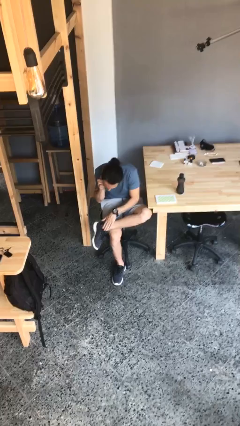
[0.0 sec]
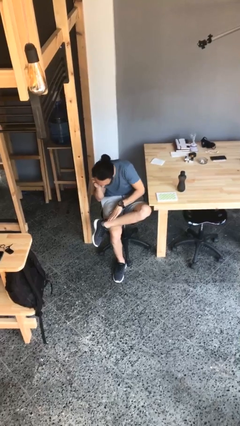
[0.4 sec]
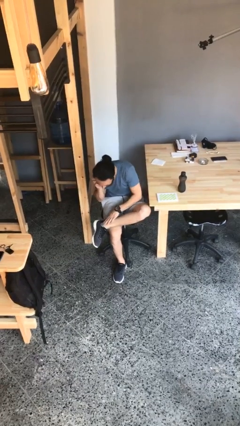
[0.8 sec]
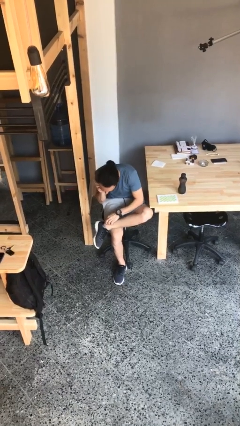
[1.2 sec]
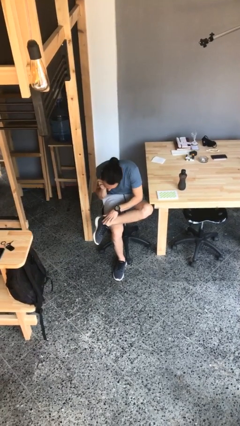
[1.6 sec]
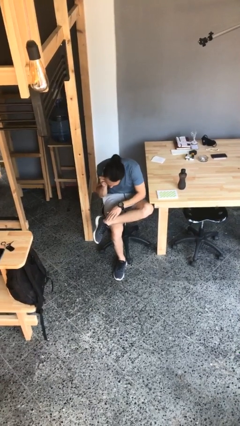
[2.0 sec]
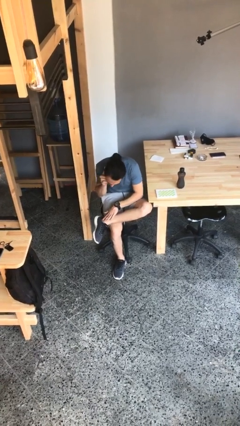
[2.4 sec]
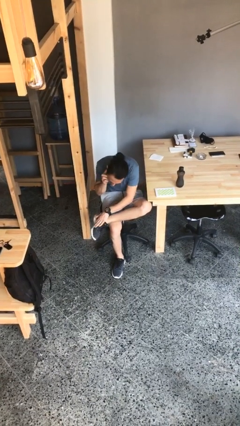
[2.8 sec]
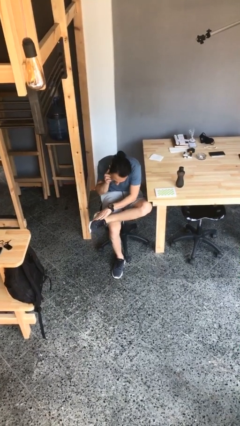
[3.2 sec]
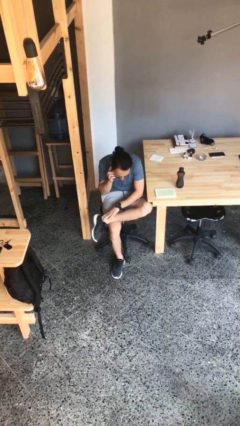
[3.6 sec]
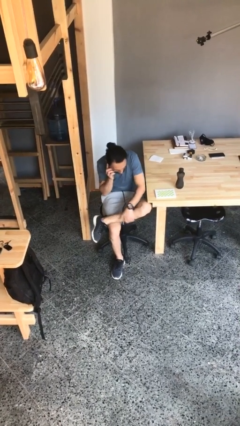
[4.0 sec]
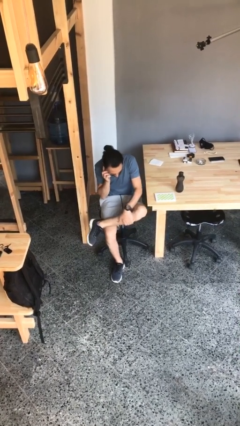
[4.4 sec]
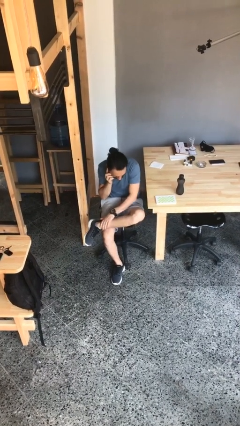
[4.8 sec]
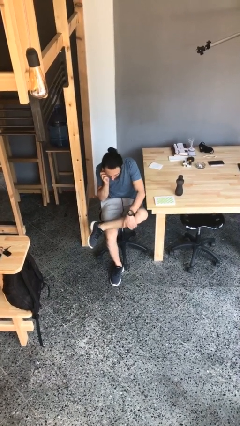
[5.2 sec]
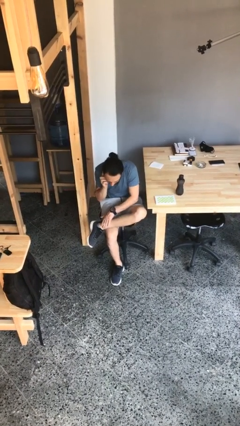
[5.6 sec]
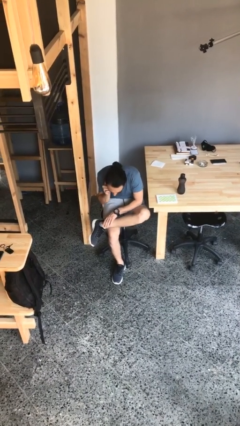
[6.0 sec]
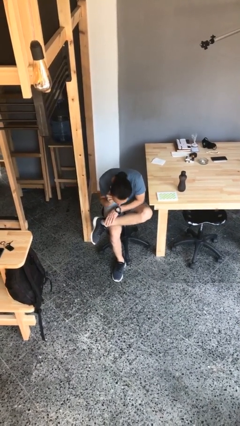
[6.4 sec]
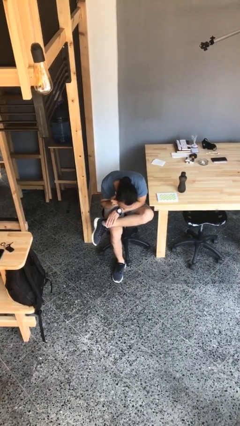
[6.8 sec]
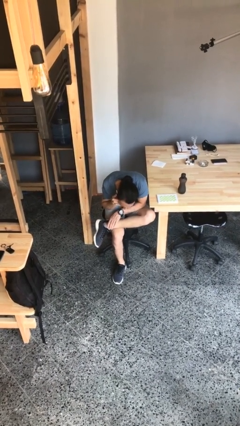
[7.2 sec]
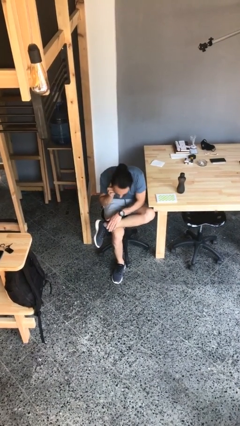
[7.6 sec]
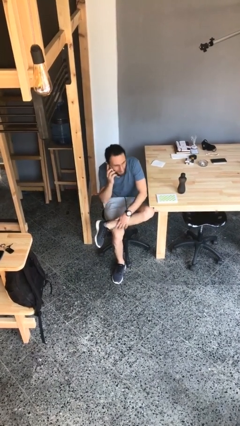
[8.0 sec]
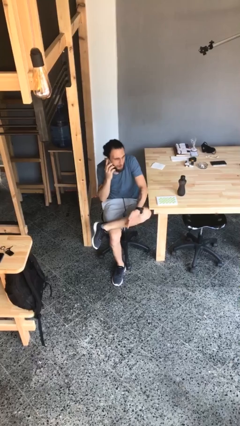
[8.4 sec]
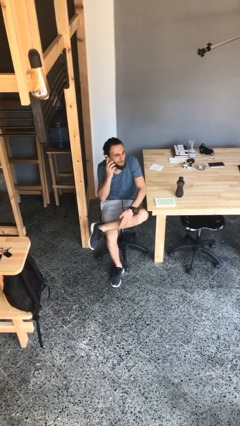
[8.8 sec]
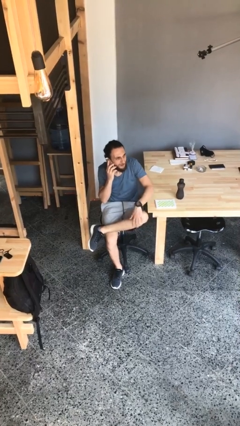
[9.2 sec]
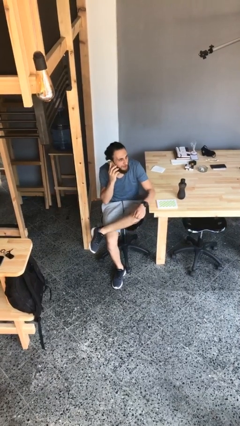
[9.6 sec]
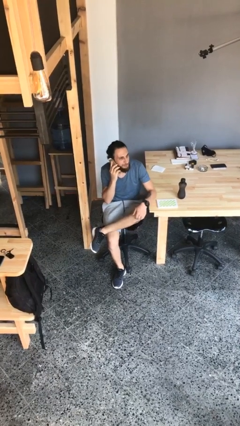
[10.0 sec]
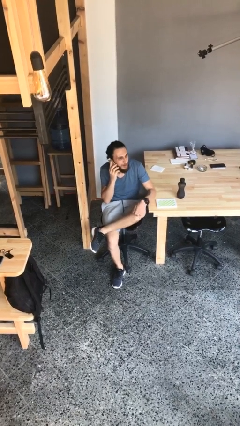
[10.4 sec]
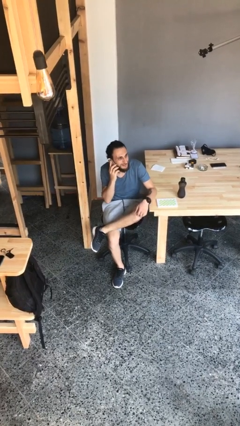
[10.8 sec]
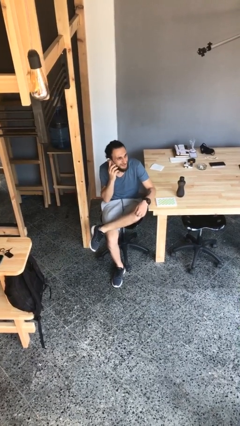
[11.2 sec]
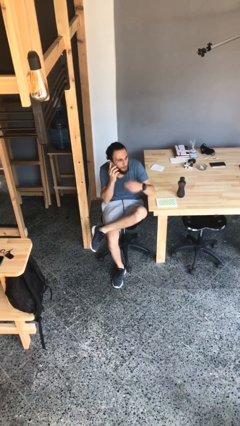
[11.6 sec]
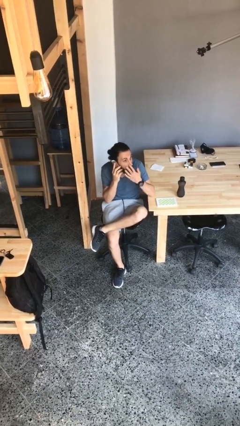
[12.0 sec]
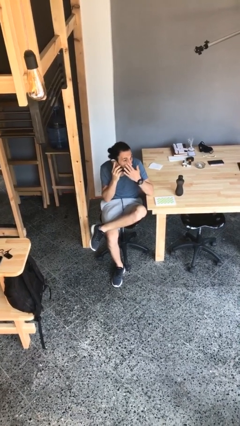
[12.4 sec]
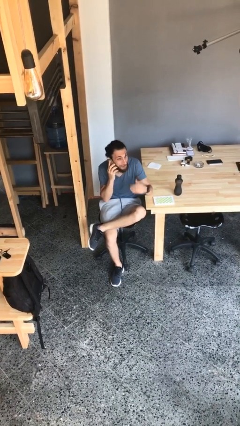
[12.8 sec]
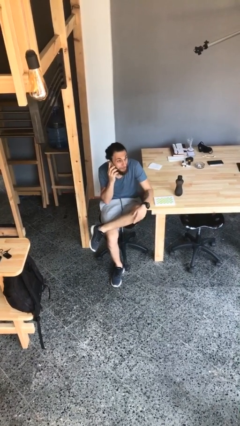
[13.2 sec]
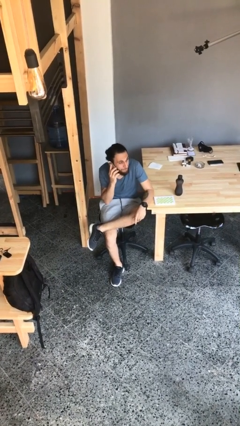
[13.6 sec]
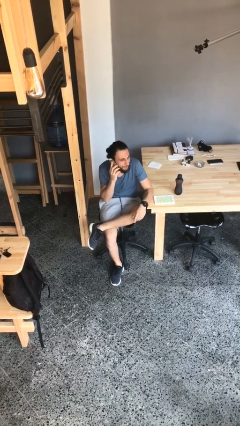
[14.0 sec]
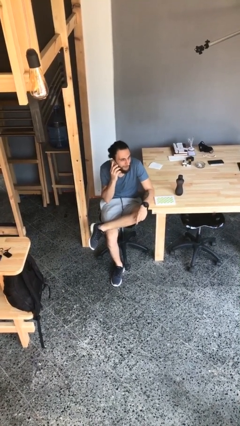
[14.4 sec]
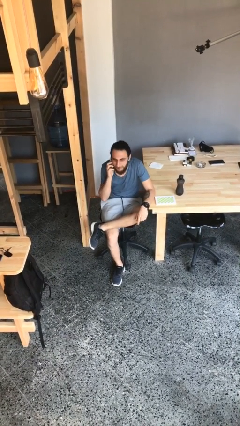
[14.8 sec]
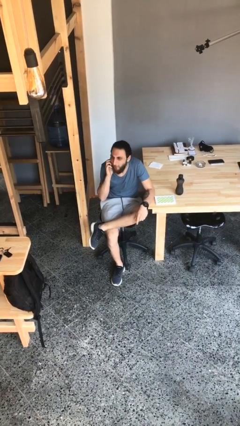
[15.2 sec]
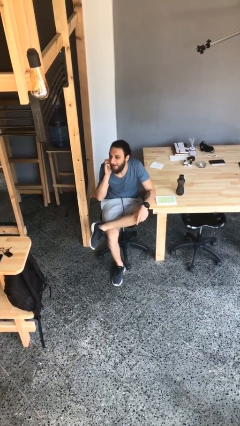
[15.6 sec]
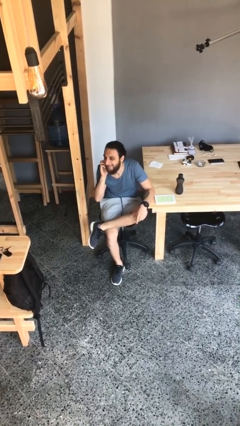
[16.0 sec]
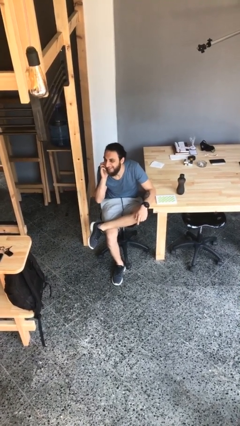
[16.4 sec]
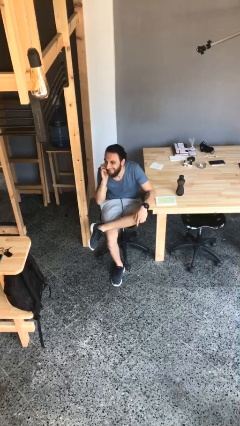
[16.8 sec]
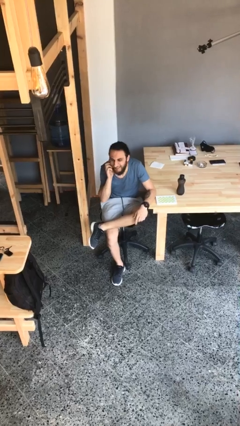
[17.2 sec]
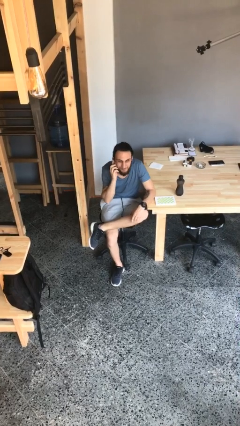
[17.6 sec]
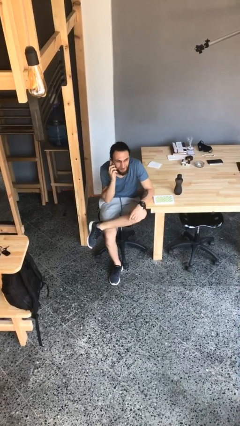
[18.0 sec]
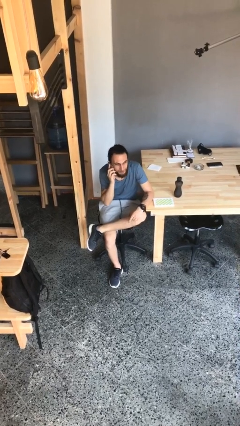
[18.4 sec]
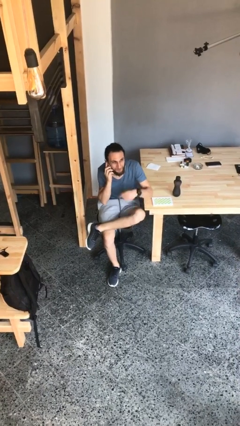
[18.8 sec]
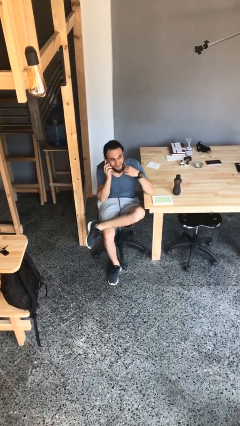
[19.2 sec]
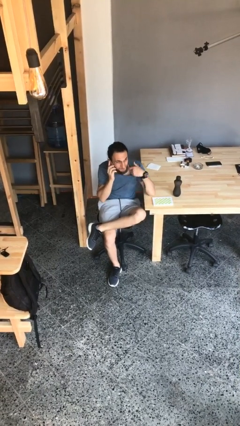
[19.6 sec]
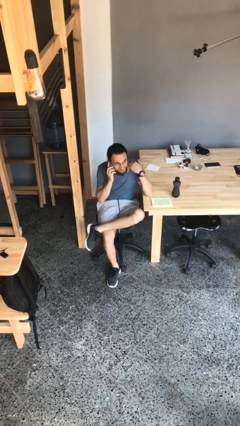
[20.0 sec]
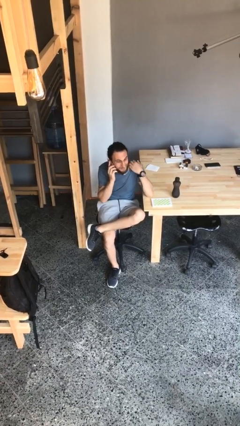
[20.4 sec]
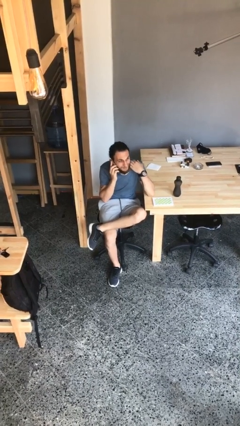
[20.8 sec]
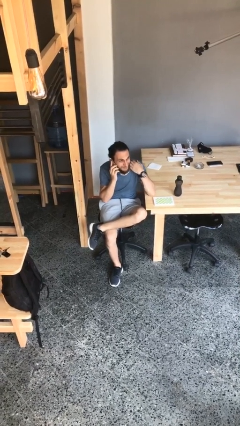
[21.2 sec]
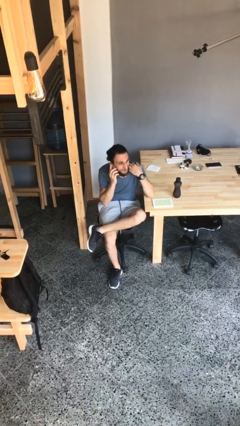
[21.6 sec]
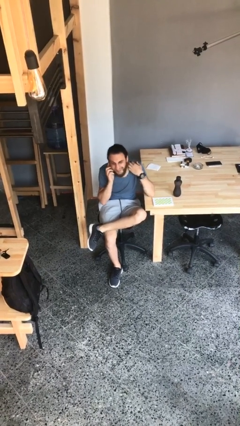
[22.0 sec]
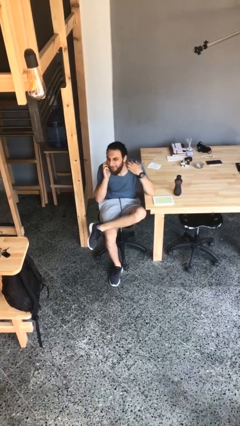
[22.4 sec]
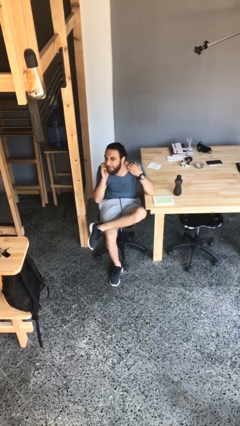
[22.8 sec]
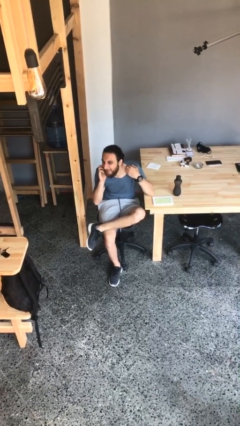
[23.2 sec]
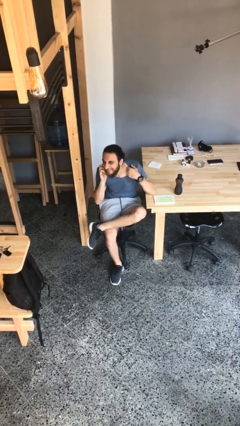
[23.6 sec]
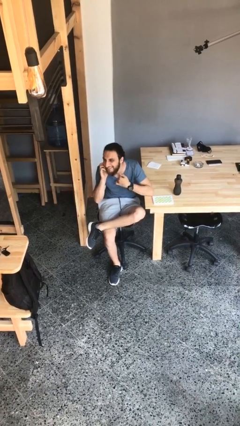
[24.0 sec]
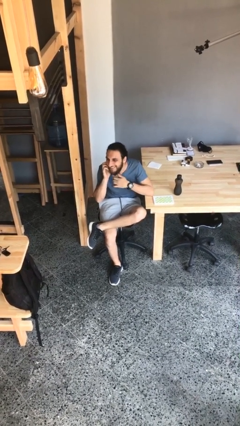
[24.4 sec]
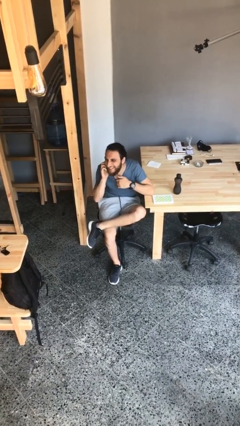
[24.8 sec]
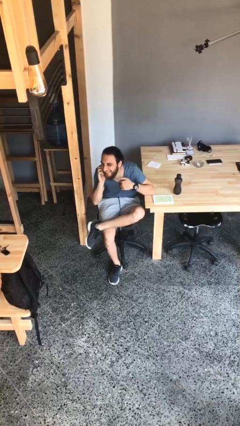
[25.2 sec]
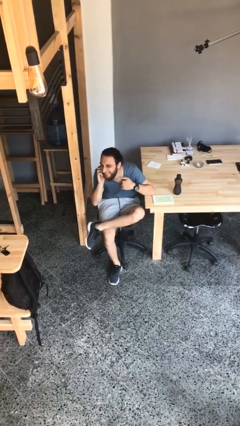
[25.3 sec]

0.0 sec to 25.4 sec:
person talks on phone

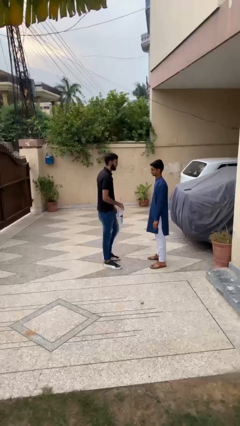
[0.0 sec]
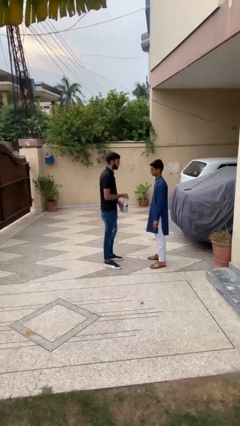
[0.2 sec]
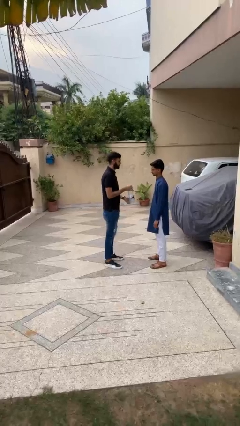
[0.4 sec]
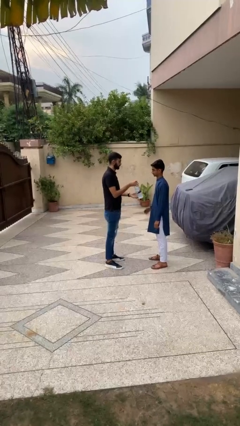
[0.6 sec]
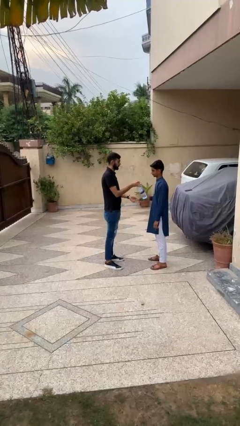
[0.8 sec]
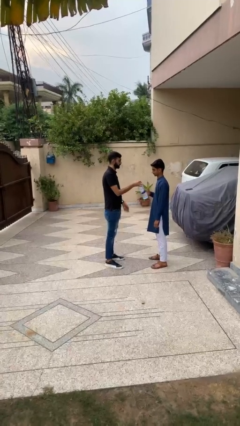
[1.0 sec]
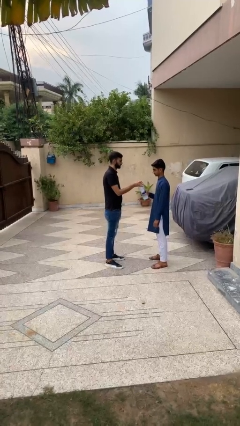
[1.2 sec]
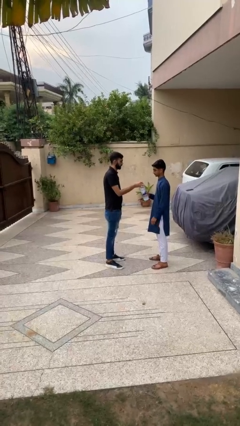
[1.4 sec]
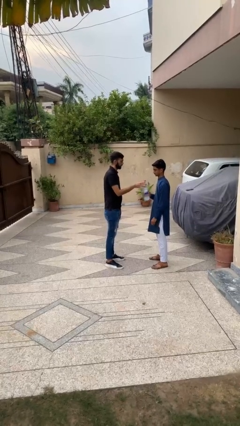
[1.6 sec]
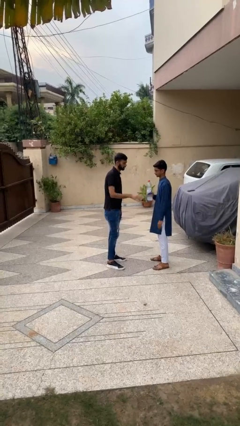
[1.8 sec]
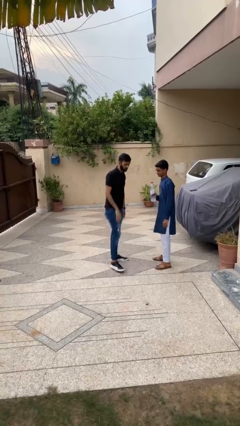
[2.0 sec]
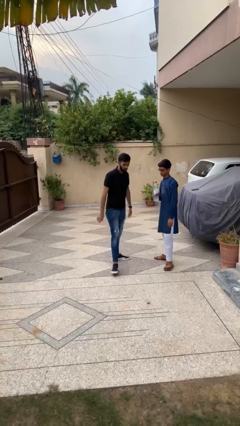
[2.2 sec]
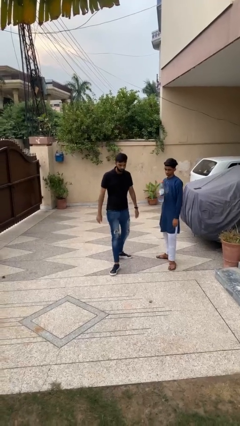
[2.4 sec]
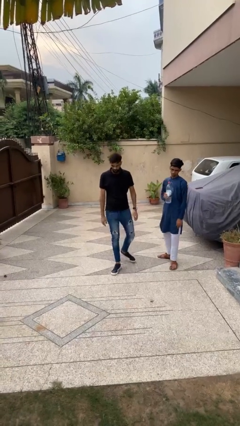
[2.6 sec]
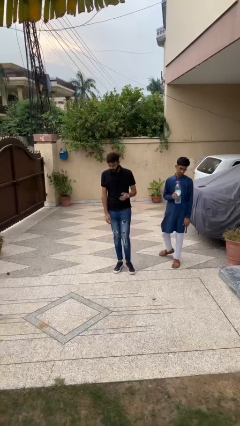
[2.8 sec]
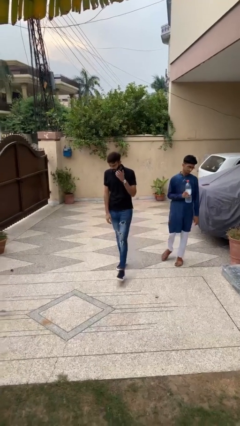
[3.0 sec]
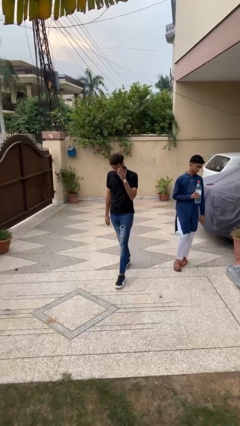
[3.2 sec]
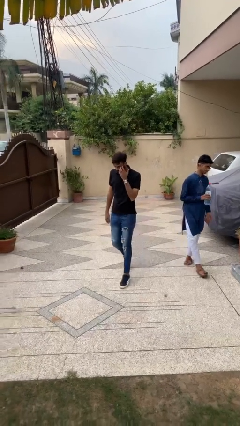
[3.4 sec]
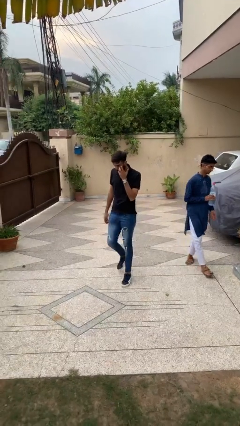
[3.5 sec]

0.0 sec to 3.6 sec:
person transfers object to person

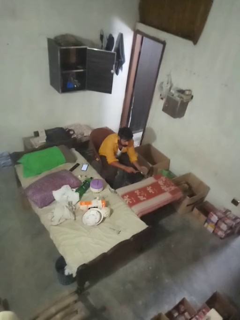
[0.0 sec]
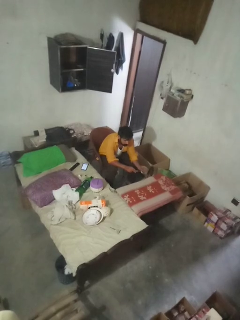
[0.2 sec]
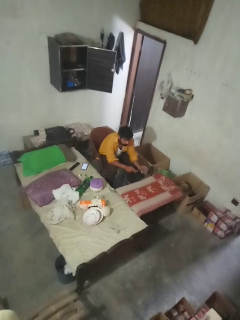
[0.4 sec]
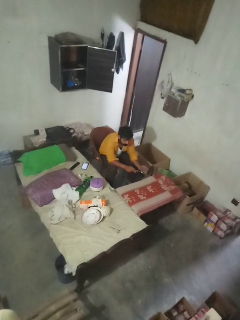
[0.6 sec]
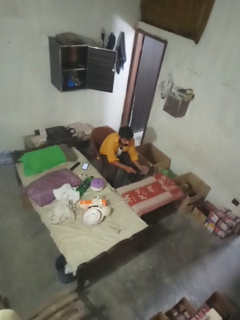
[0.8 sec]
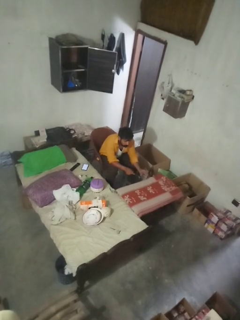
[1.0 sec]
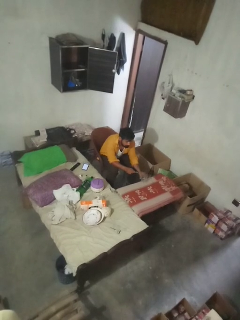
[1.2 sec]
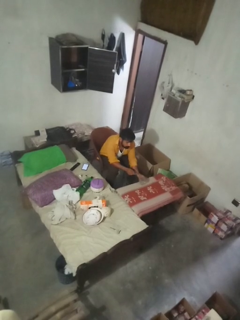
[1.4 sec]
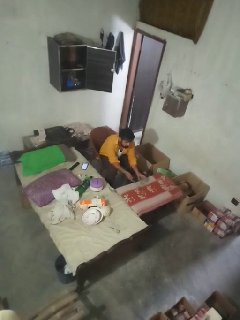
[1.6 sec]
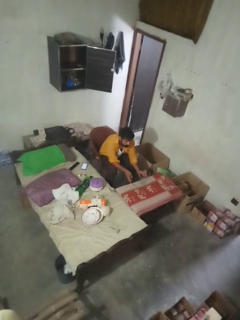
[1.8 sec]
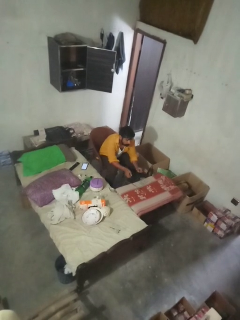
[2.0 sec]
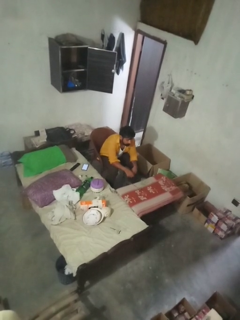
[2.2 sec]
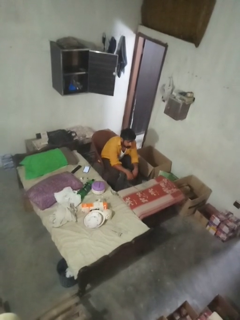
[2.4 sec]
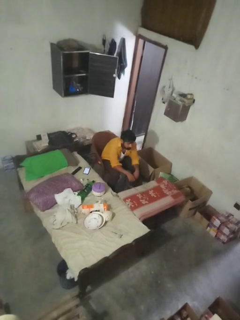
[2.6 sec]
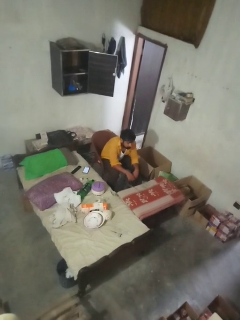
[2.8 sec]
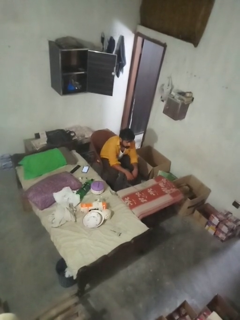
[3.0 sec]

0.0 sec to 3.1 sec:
person sets upright glass
